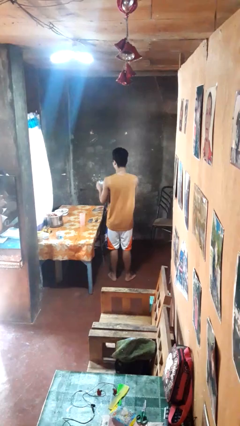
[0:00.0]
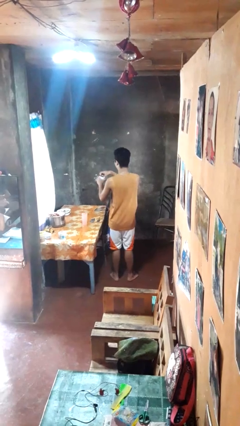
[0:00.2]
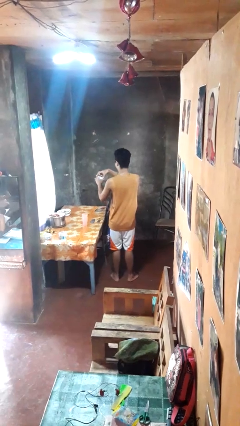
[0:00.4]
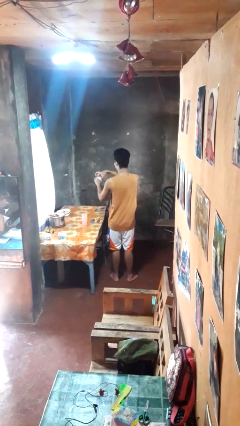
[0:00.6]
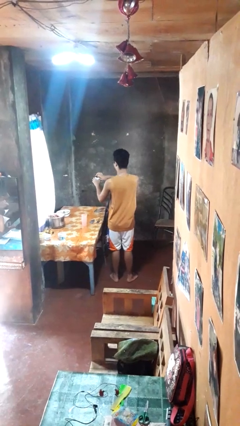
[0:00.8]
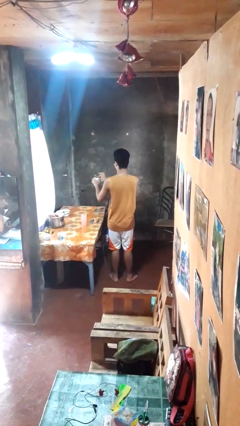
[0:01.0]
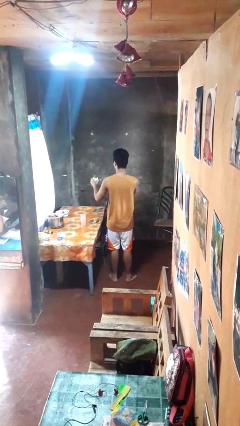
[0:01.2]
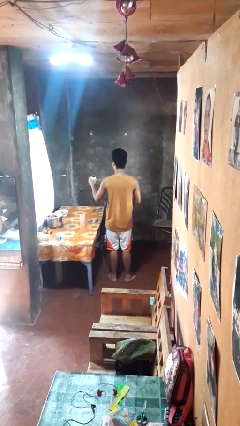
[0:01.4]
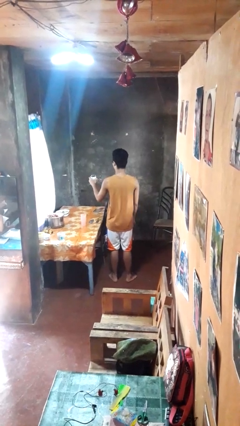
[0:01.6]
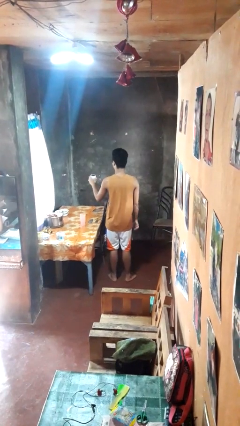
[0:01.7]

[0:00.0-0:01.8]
person opens beverage can

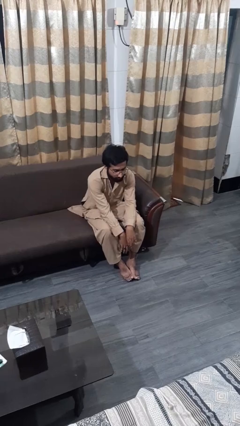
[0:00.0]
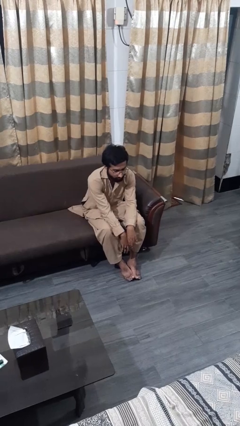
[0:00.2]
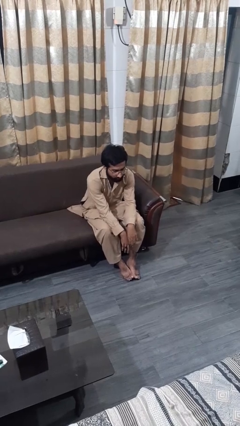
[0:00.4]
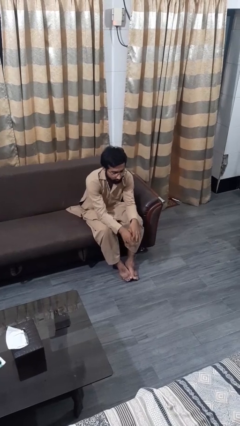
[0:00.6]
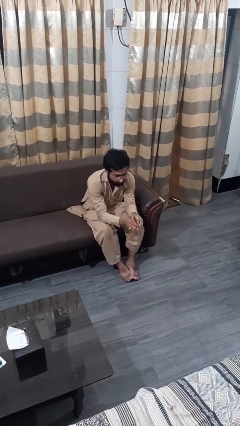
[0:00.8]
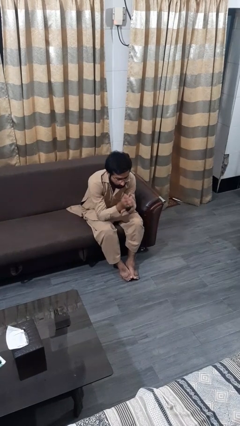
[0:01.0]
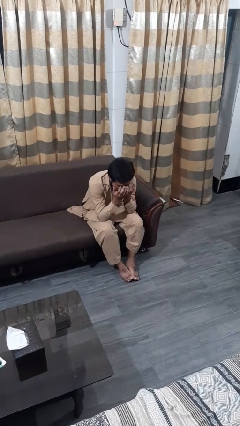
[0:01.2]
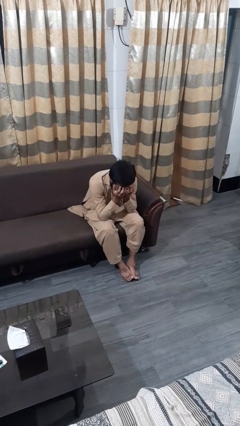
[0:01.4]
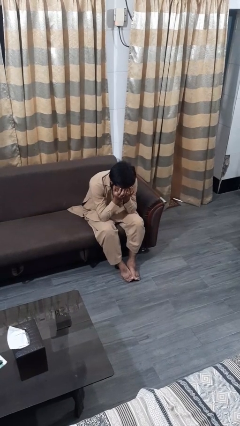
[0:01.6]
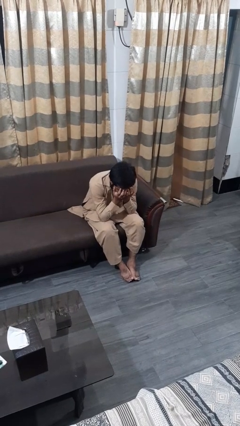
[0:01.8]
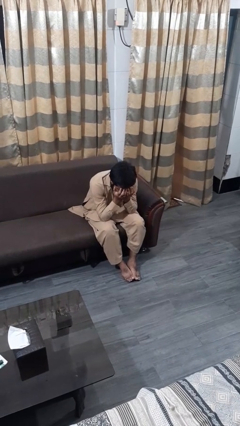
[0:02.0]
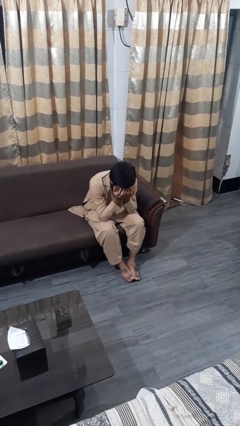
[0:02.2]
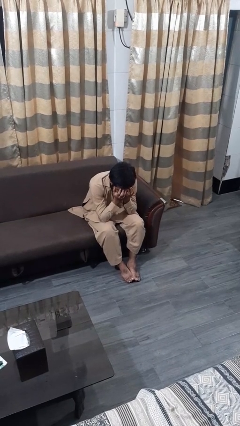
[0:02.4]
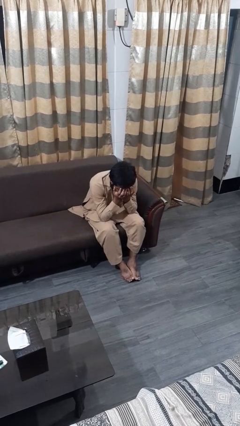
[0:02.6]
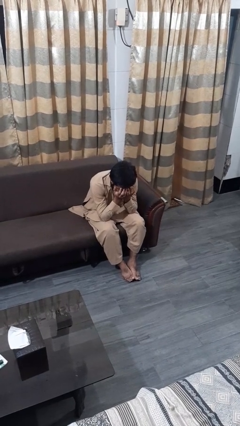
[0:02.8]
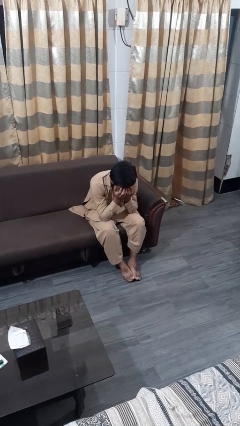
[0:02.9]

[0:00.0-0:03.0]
person covers face with hands

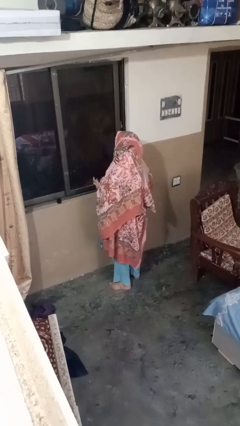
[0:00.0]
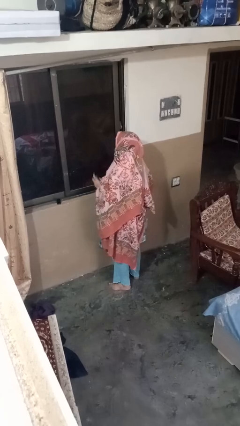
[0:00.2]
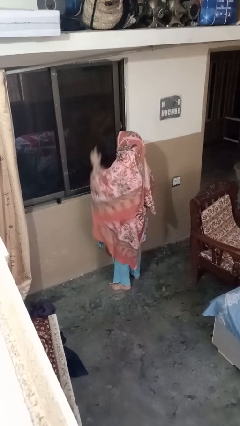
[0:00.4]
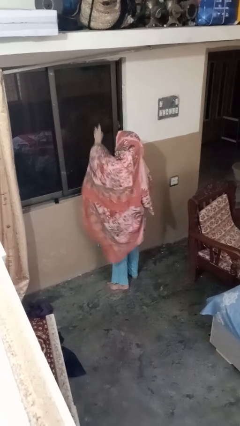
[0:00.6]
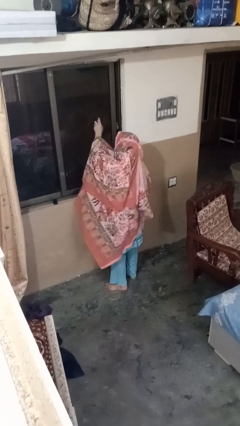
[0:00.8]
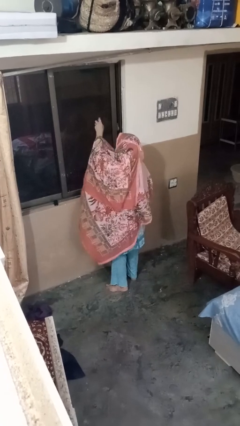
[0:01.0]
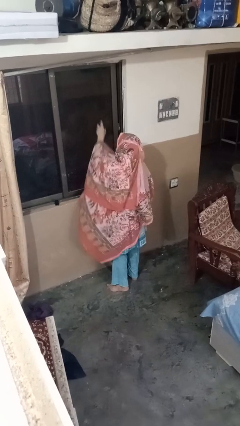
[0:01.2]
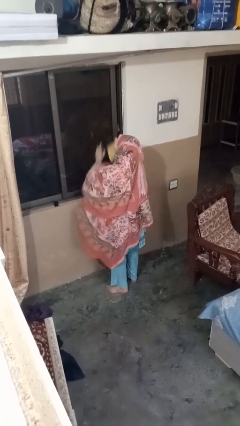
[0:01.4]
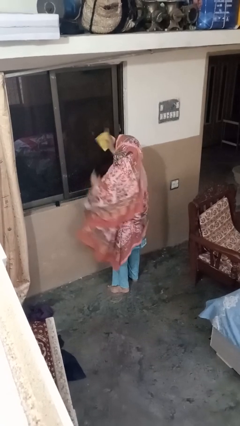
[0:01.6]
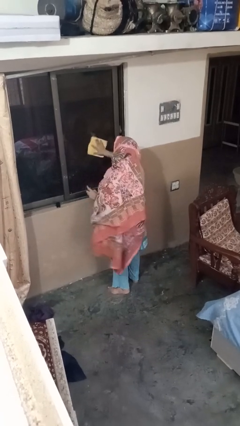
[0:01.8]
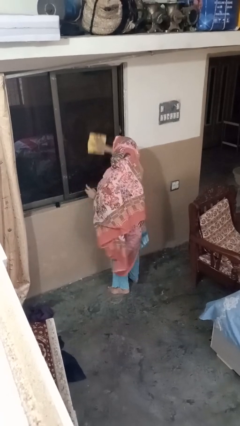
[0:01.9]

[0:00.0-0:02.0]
person sprays from bottle

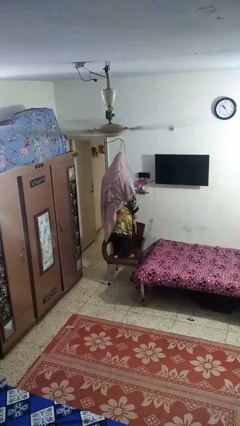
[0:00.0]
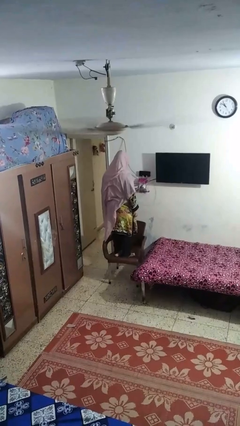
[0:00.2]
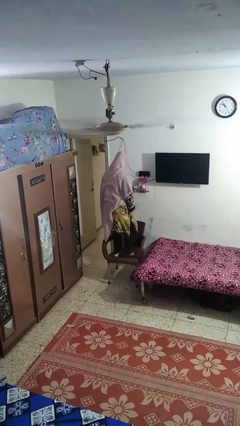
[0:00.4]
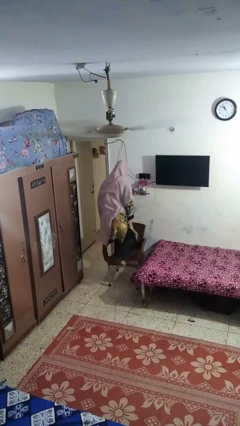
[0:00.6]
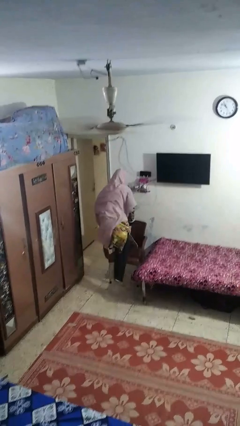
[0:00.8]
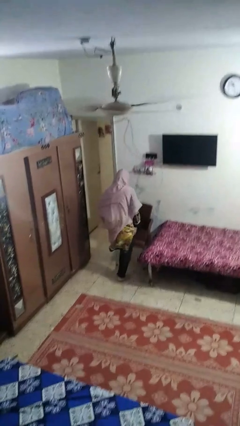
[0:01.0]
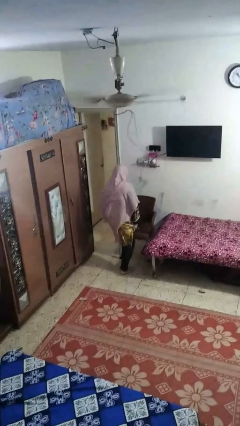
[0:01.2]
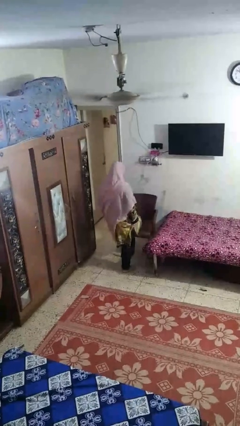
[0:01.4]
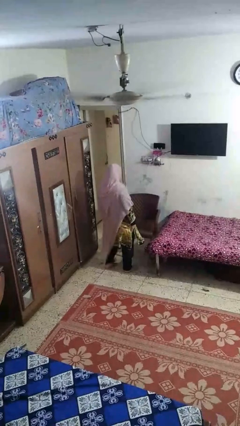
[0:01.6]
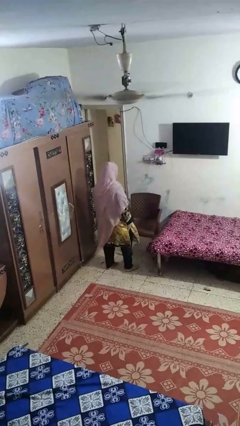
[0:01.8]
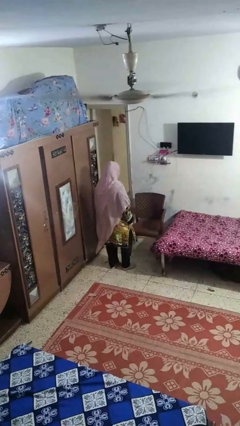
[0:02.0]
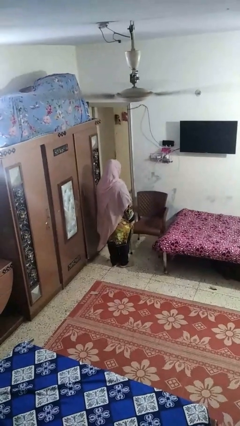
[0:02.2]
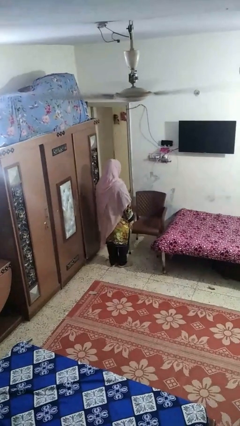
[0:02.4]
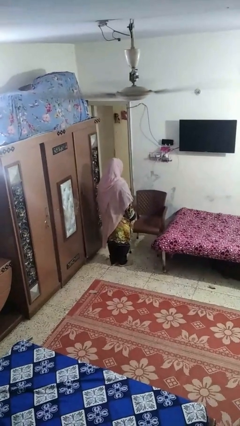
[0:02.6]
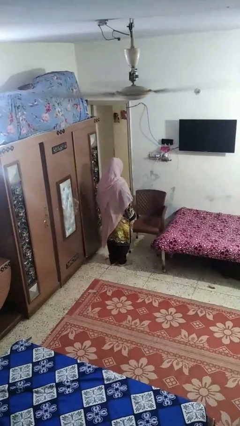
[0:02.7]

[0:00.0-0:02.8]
person climbs off chair

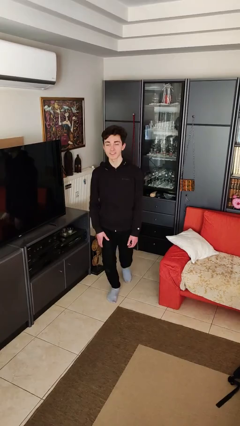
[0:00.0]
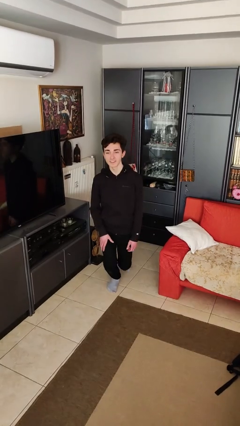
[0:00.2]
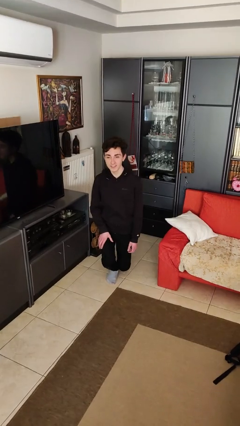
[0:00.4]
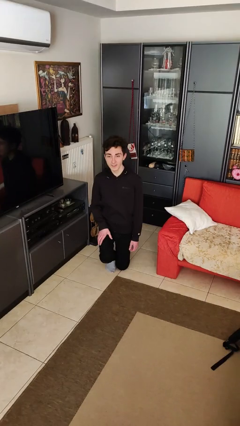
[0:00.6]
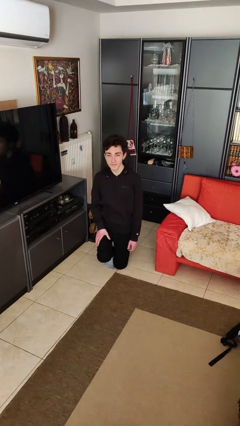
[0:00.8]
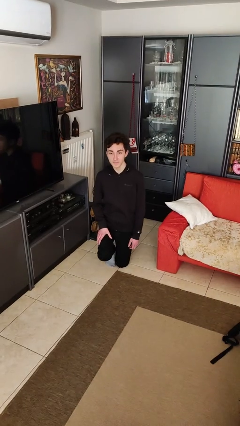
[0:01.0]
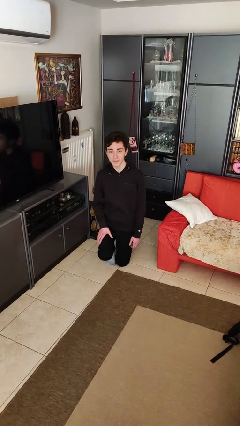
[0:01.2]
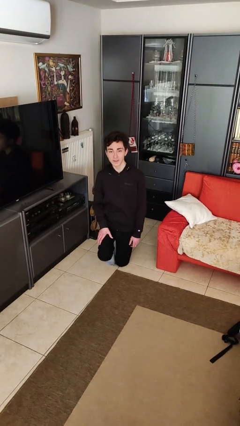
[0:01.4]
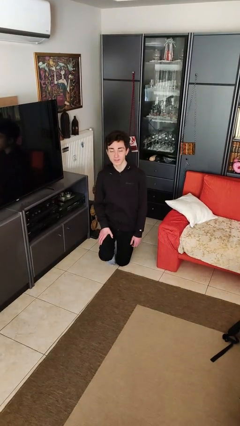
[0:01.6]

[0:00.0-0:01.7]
person kneels

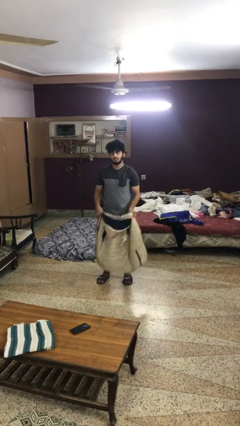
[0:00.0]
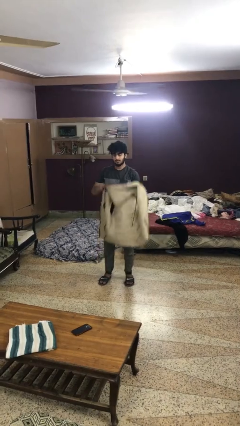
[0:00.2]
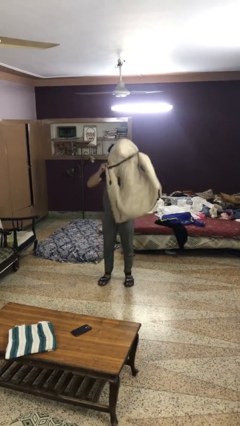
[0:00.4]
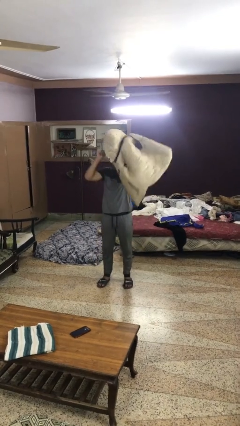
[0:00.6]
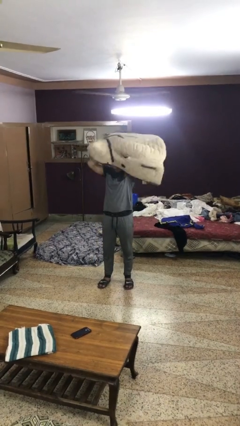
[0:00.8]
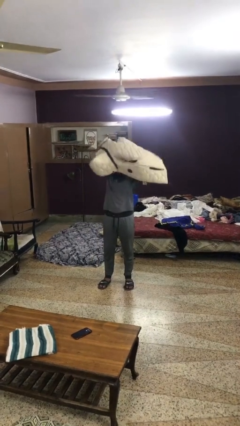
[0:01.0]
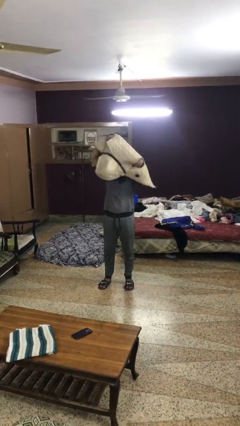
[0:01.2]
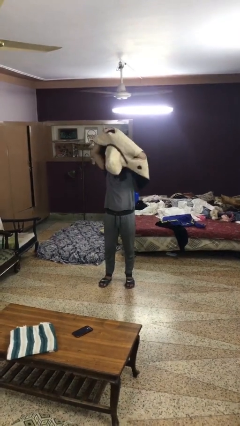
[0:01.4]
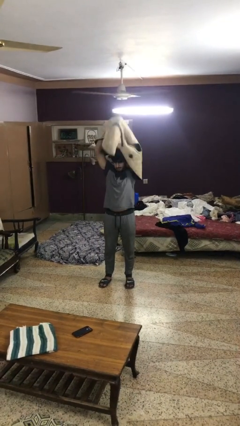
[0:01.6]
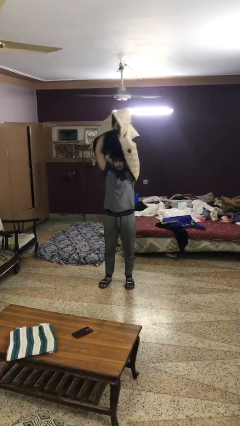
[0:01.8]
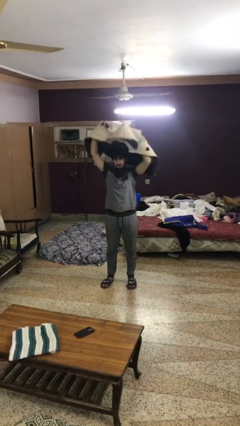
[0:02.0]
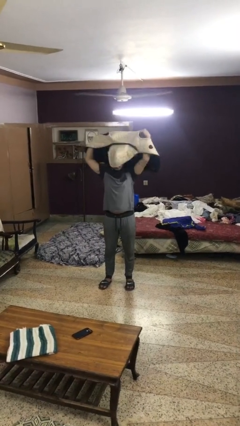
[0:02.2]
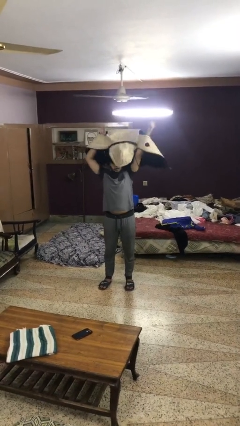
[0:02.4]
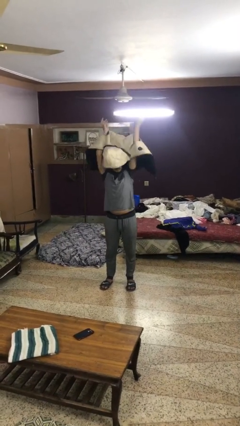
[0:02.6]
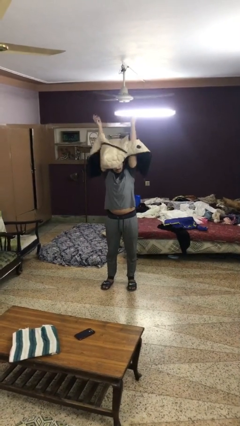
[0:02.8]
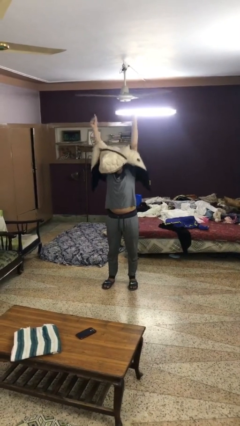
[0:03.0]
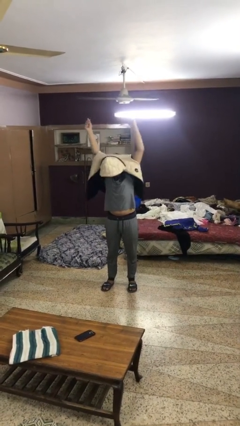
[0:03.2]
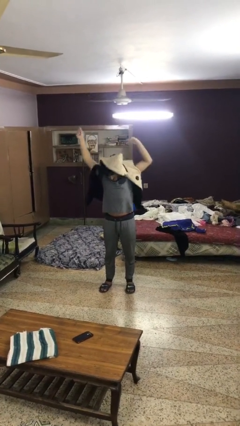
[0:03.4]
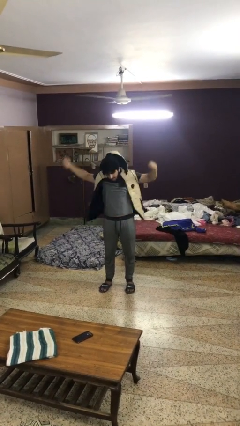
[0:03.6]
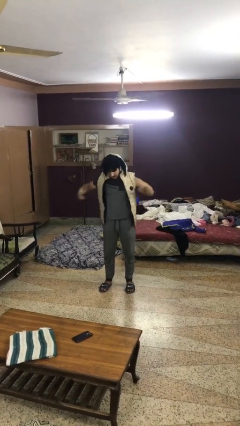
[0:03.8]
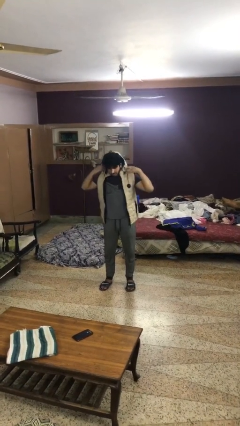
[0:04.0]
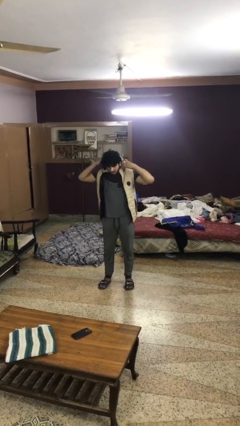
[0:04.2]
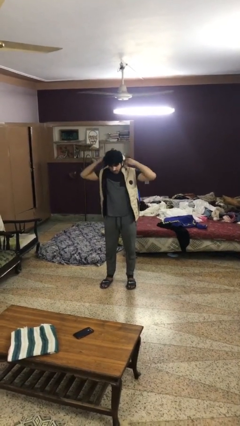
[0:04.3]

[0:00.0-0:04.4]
person puts on hoodie

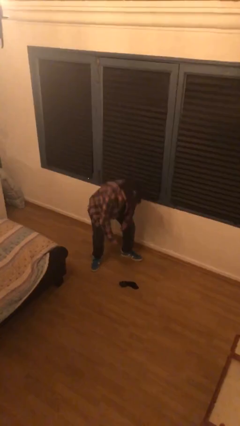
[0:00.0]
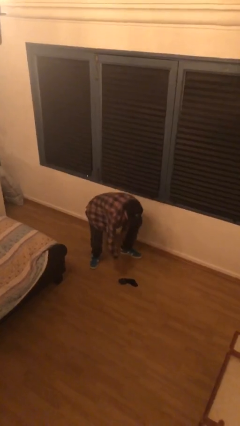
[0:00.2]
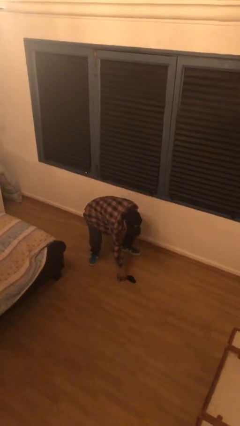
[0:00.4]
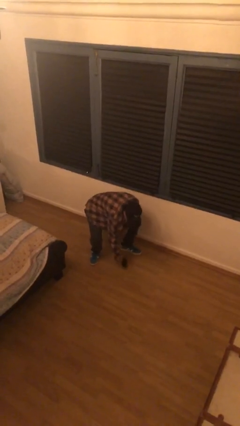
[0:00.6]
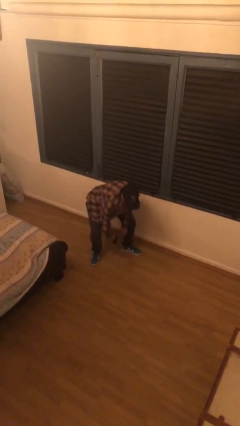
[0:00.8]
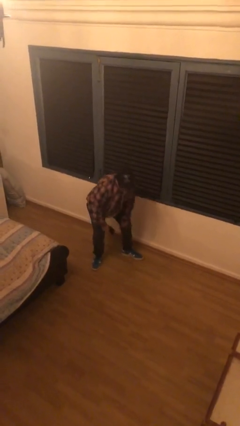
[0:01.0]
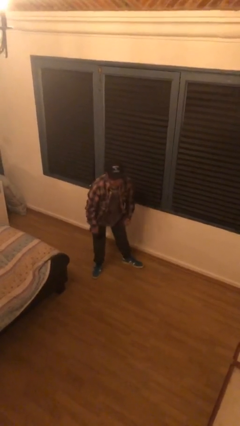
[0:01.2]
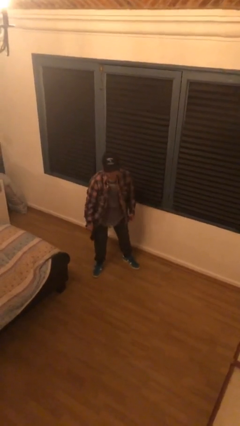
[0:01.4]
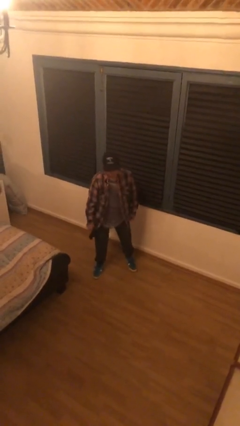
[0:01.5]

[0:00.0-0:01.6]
person picks up object from floor
